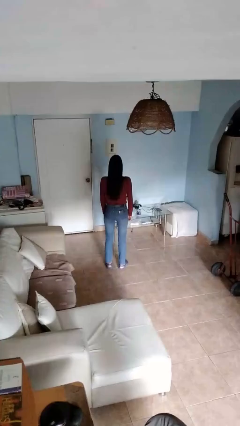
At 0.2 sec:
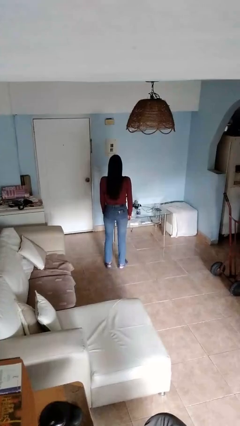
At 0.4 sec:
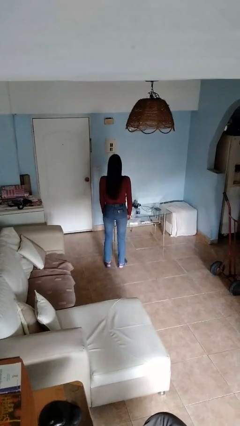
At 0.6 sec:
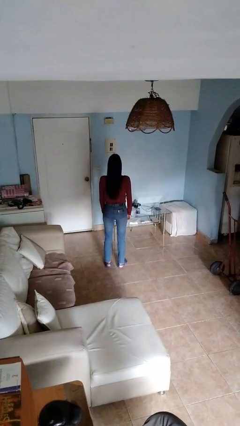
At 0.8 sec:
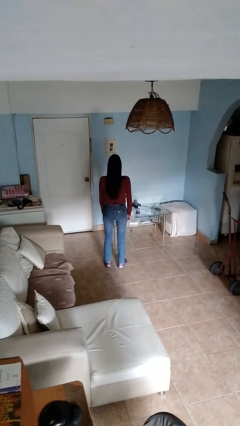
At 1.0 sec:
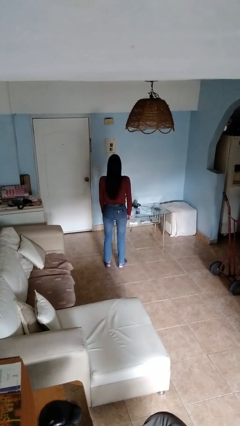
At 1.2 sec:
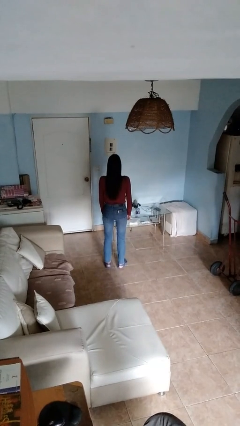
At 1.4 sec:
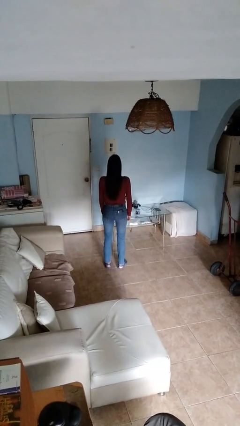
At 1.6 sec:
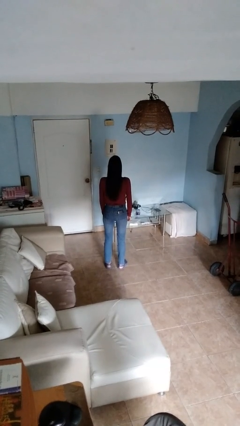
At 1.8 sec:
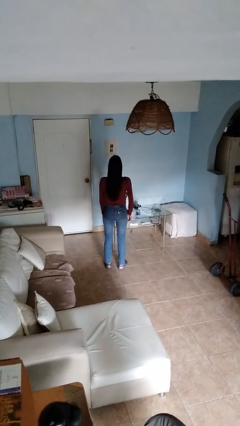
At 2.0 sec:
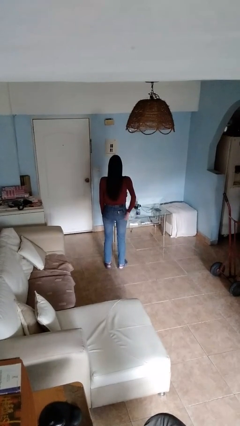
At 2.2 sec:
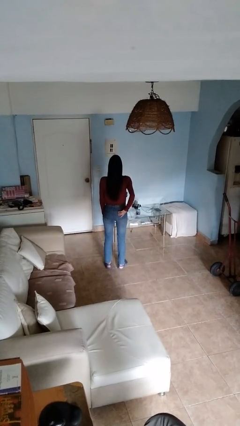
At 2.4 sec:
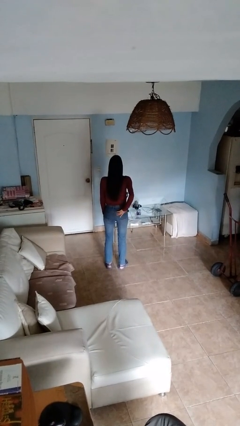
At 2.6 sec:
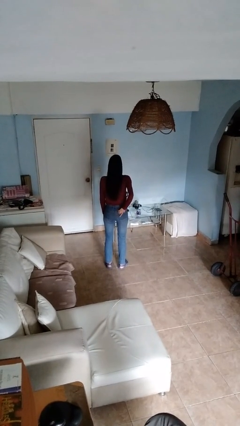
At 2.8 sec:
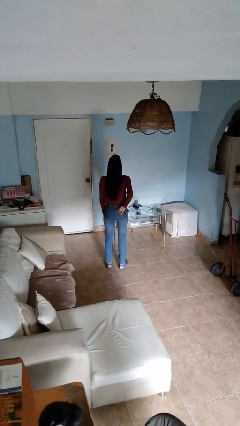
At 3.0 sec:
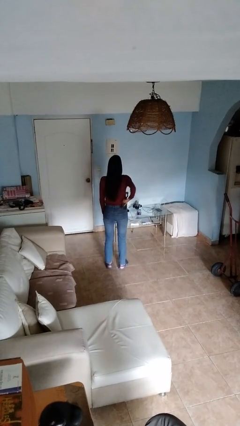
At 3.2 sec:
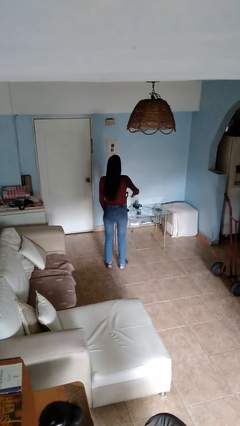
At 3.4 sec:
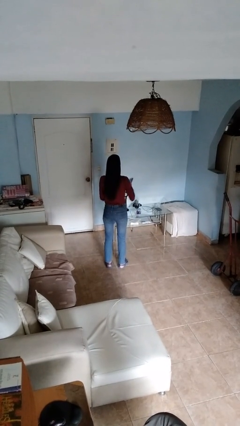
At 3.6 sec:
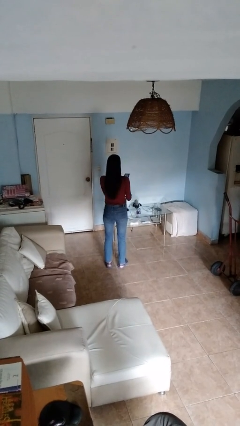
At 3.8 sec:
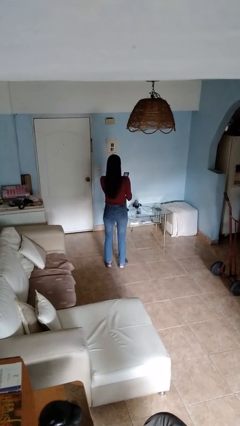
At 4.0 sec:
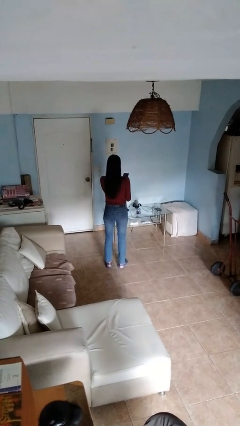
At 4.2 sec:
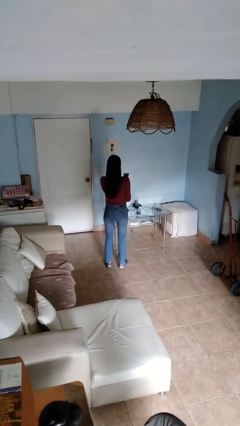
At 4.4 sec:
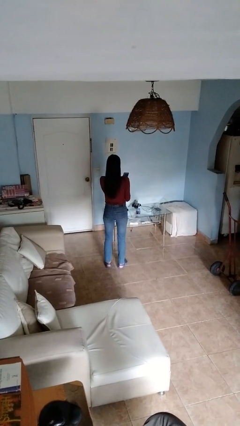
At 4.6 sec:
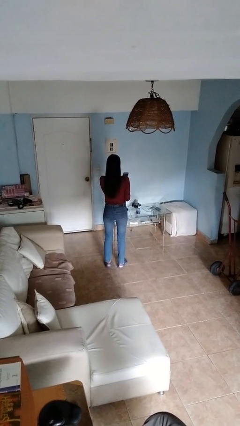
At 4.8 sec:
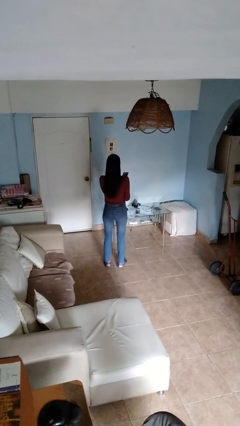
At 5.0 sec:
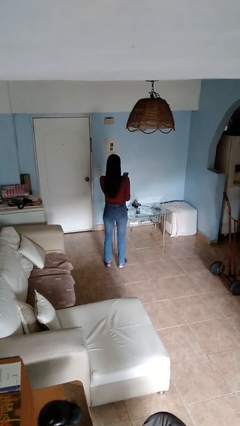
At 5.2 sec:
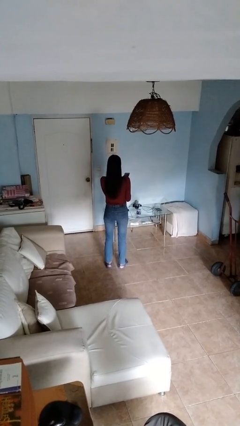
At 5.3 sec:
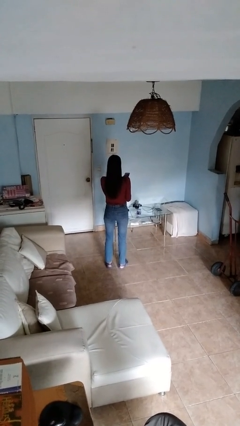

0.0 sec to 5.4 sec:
person takes phone from pocket

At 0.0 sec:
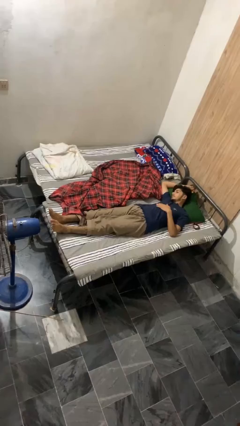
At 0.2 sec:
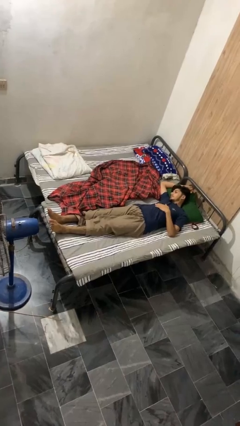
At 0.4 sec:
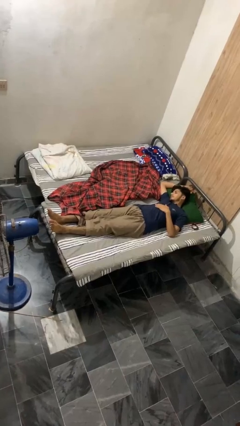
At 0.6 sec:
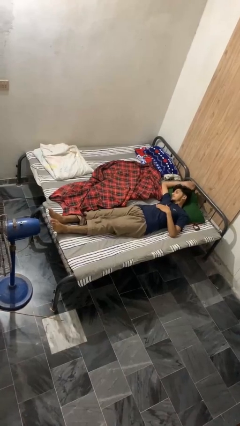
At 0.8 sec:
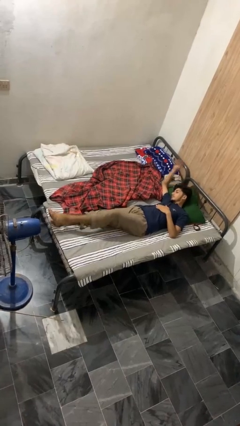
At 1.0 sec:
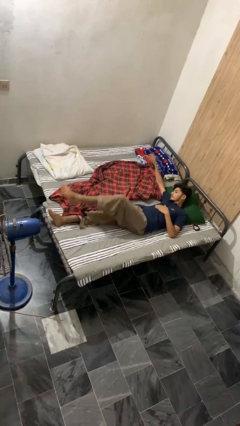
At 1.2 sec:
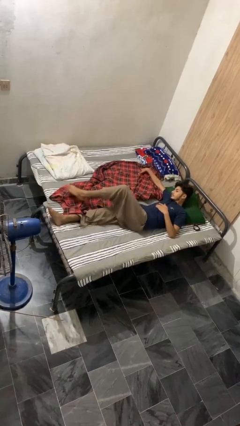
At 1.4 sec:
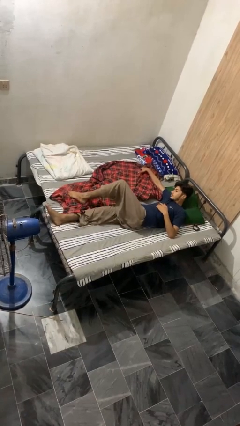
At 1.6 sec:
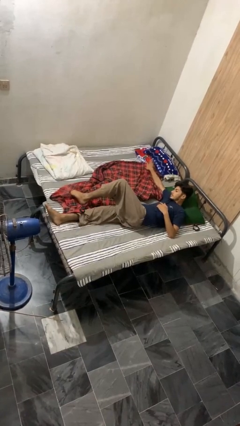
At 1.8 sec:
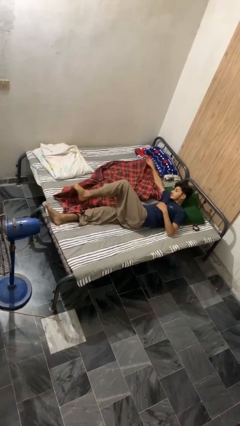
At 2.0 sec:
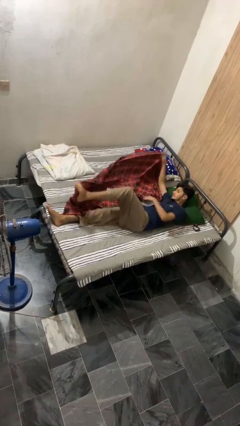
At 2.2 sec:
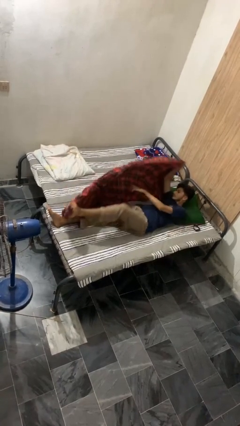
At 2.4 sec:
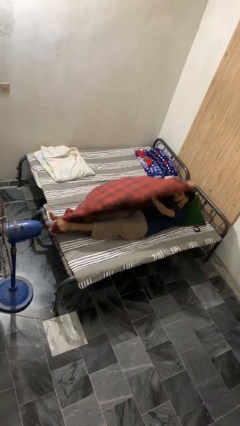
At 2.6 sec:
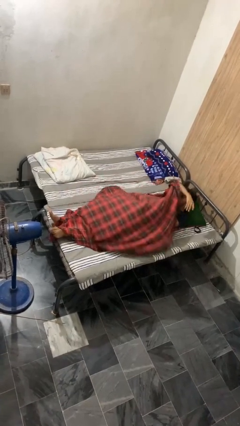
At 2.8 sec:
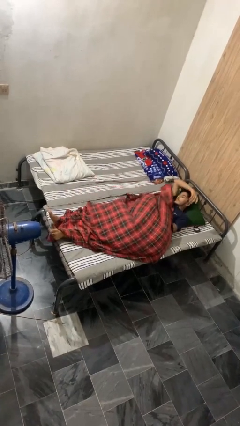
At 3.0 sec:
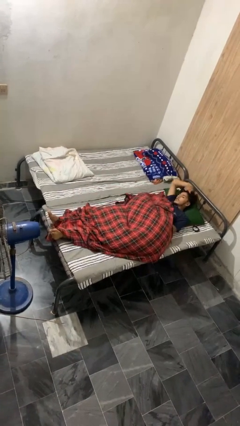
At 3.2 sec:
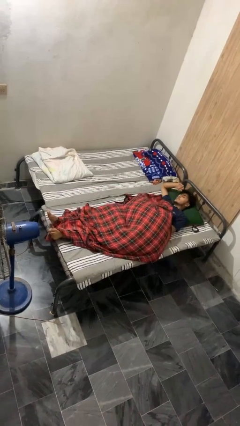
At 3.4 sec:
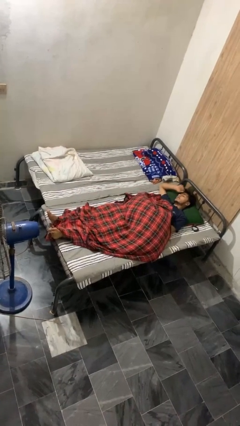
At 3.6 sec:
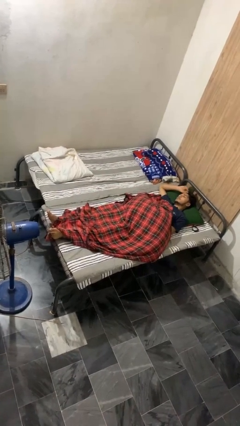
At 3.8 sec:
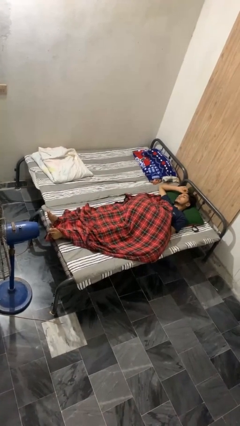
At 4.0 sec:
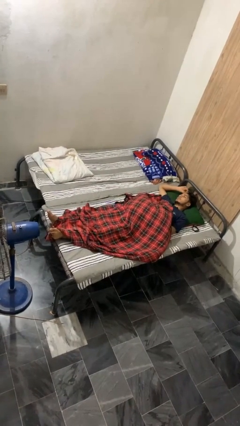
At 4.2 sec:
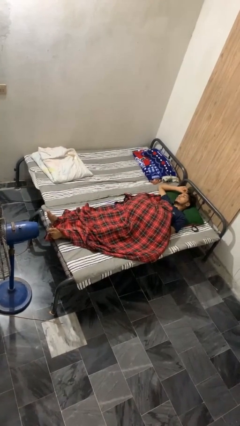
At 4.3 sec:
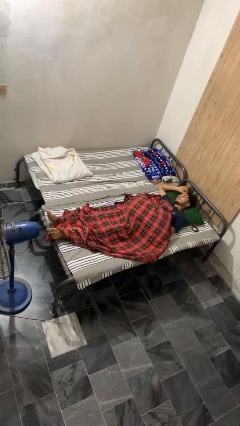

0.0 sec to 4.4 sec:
person covers with bedsheets

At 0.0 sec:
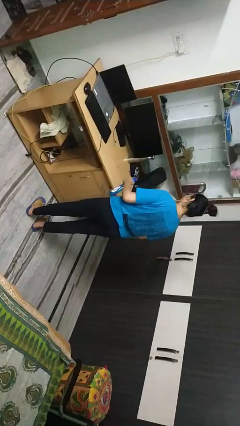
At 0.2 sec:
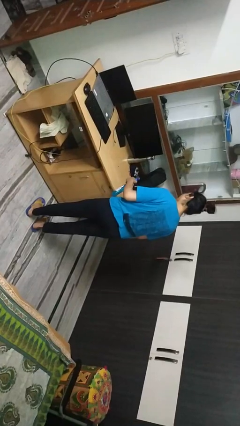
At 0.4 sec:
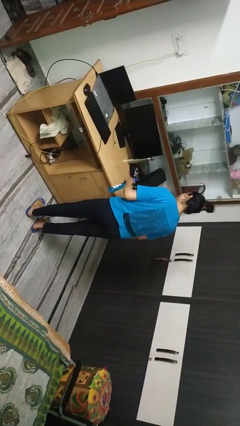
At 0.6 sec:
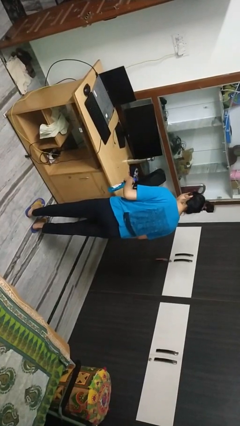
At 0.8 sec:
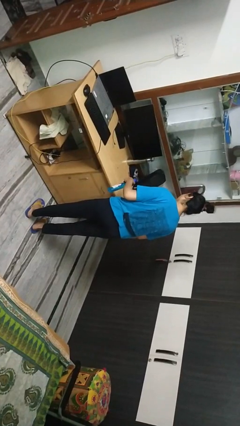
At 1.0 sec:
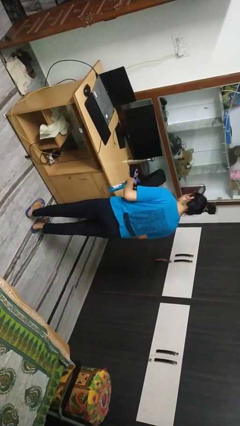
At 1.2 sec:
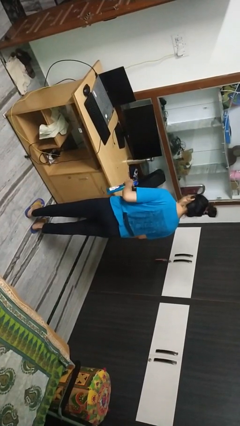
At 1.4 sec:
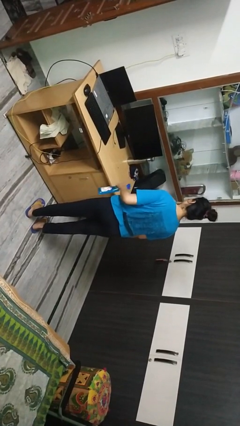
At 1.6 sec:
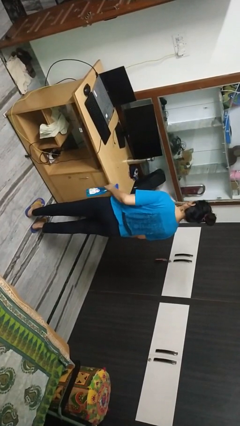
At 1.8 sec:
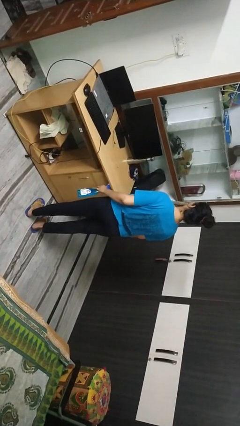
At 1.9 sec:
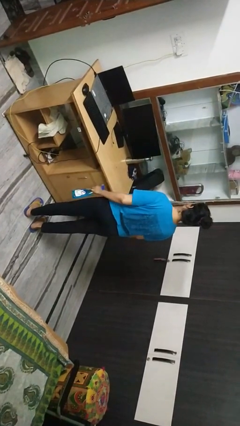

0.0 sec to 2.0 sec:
person sprays from bottle

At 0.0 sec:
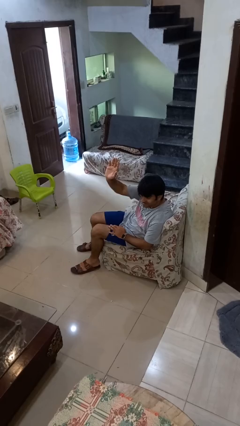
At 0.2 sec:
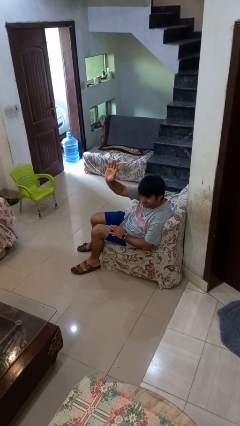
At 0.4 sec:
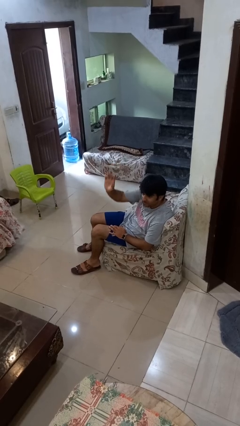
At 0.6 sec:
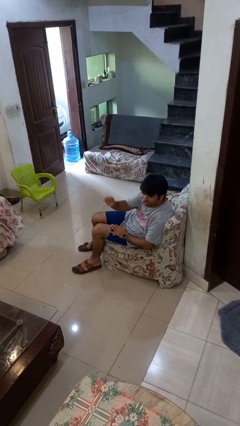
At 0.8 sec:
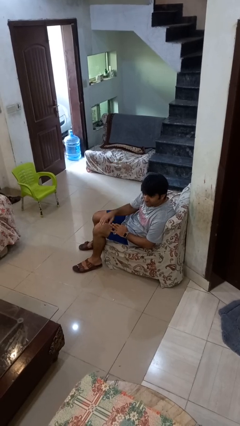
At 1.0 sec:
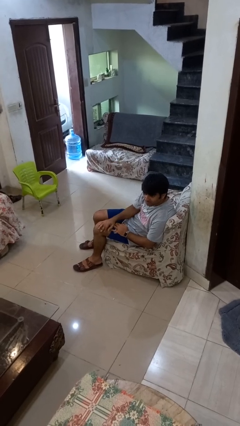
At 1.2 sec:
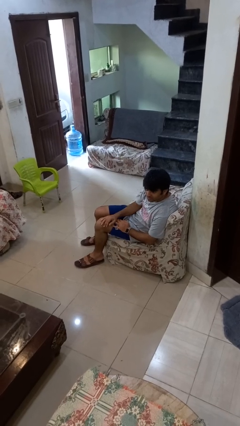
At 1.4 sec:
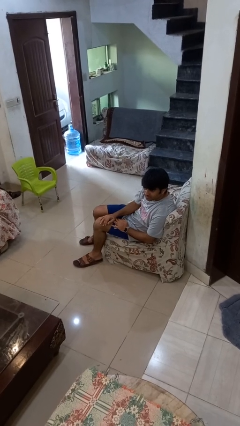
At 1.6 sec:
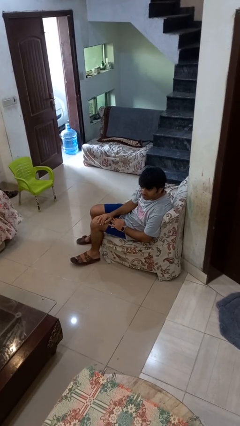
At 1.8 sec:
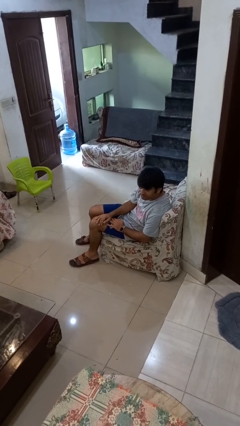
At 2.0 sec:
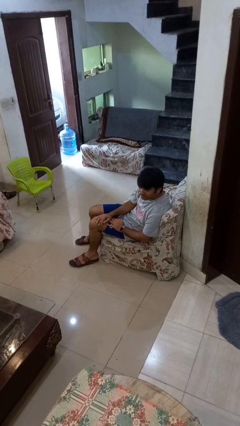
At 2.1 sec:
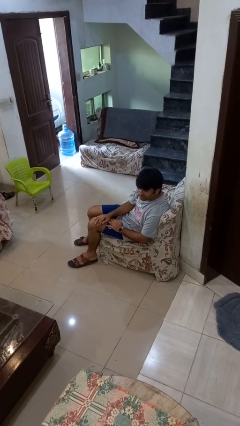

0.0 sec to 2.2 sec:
person gestures lower hand

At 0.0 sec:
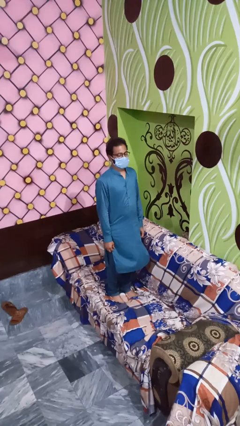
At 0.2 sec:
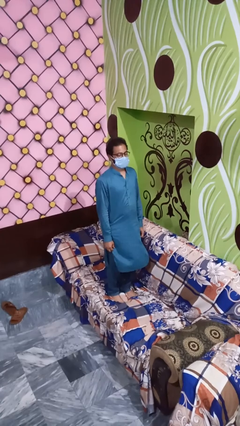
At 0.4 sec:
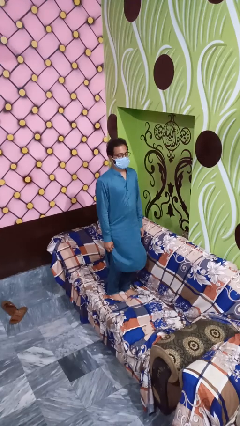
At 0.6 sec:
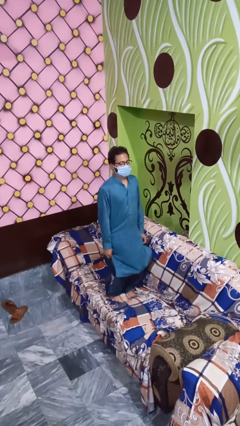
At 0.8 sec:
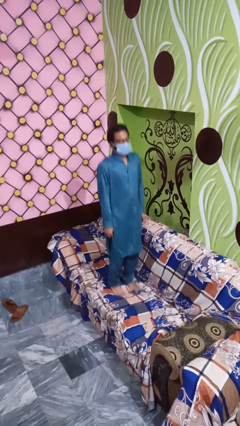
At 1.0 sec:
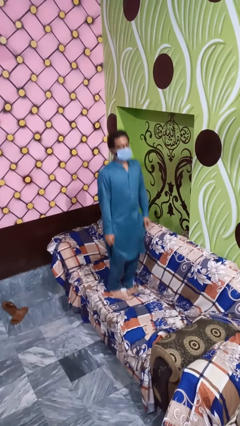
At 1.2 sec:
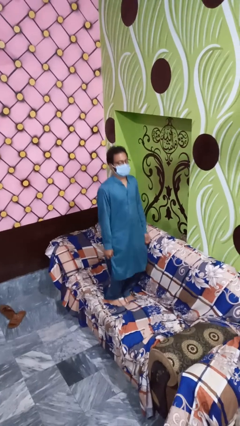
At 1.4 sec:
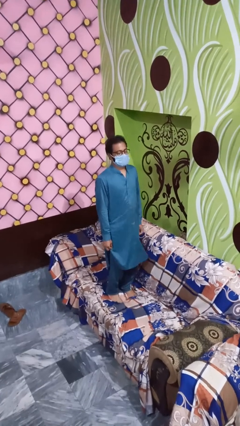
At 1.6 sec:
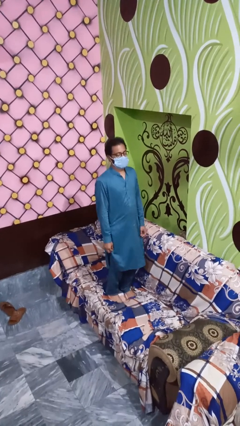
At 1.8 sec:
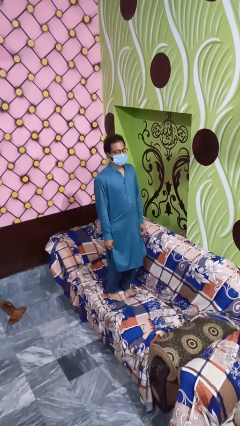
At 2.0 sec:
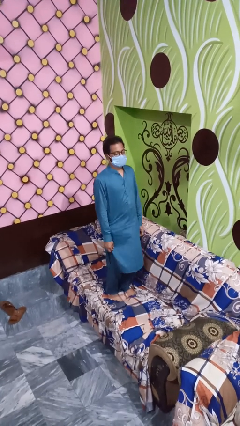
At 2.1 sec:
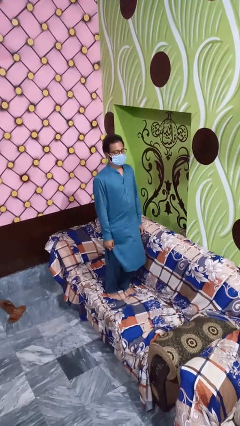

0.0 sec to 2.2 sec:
person jumps on couch

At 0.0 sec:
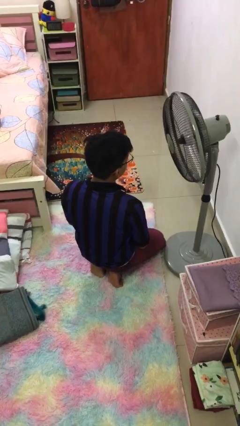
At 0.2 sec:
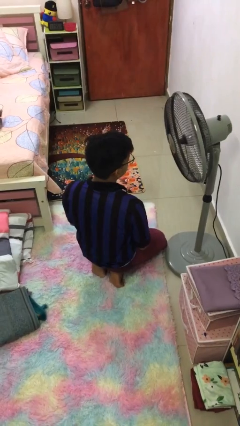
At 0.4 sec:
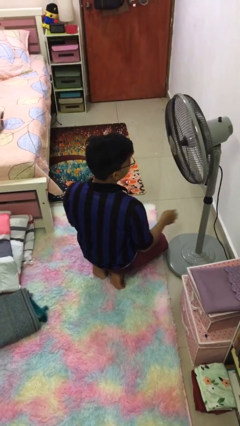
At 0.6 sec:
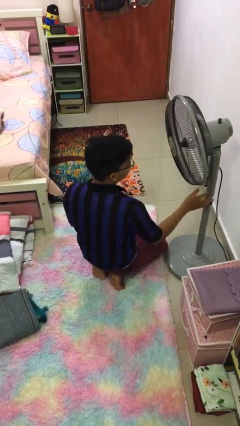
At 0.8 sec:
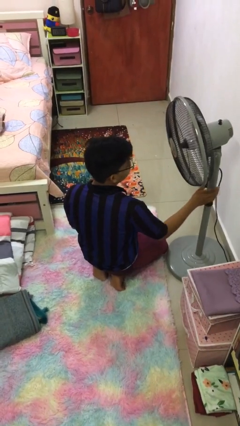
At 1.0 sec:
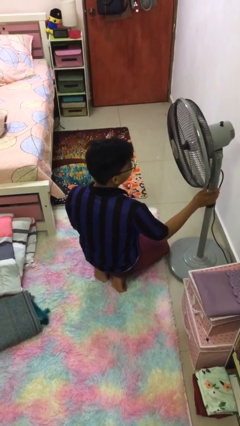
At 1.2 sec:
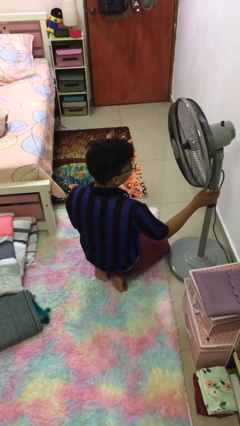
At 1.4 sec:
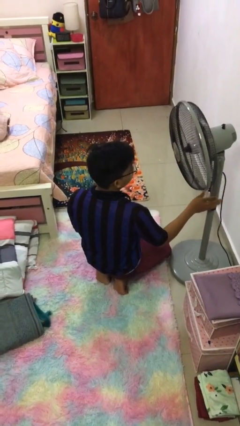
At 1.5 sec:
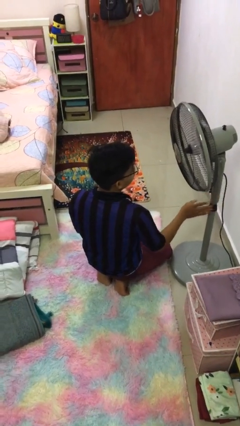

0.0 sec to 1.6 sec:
person turns off fan
